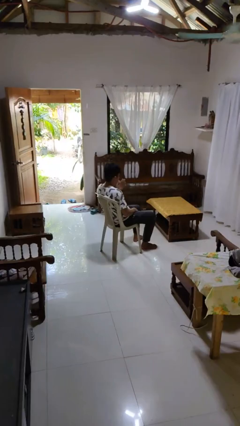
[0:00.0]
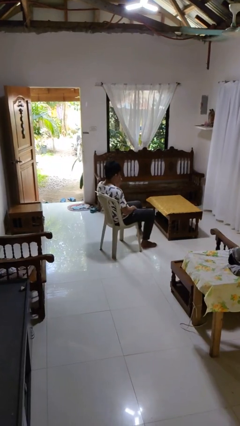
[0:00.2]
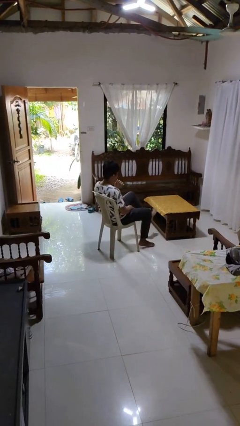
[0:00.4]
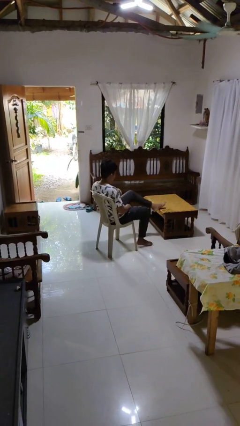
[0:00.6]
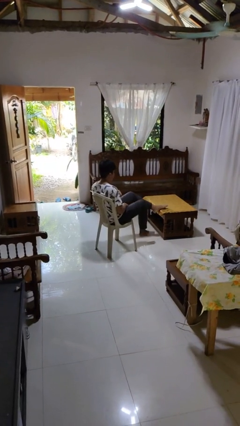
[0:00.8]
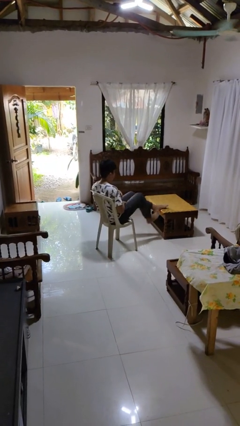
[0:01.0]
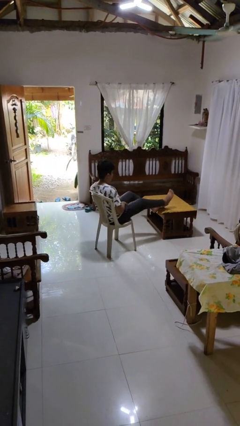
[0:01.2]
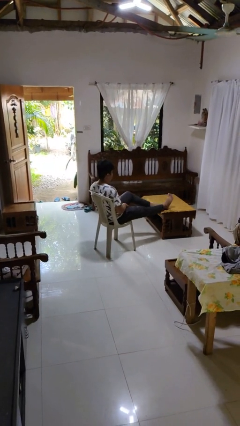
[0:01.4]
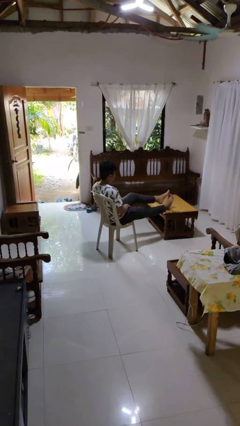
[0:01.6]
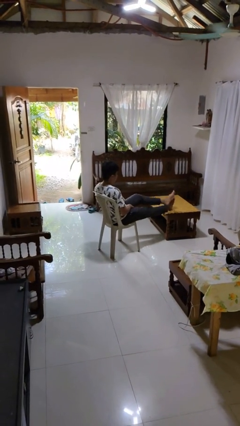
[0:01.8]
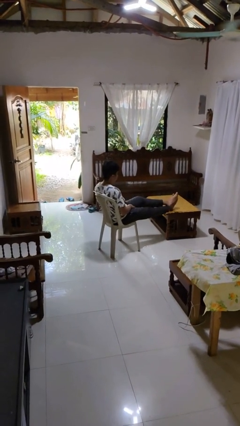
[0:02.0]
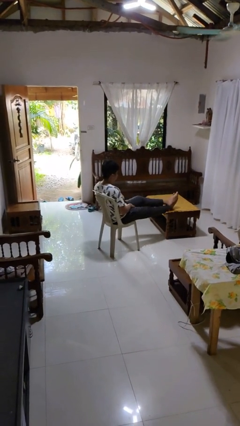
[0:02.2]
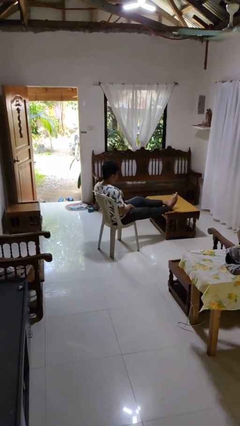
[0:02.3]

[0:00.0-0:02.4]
person puts feet up

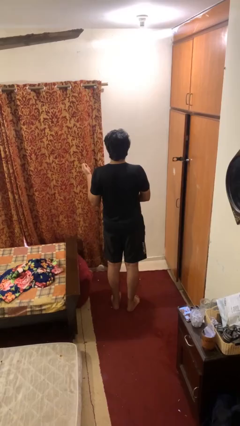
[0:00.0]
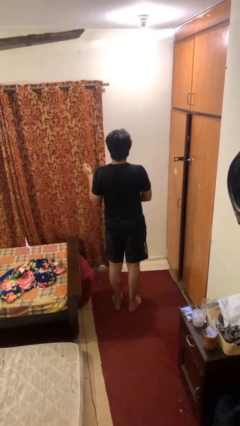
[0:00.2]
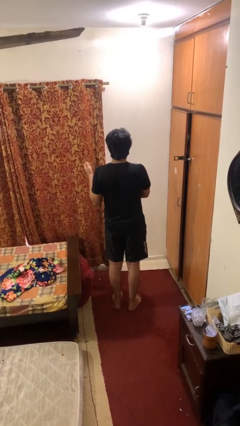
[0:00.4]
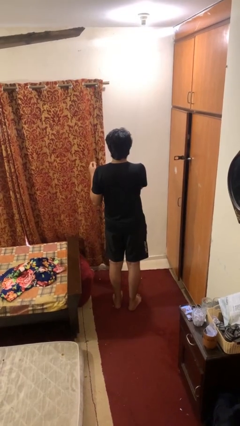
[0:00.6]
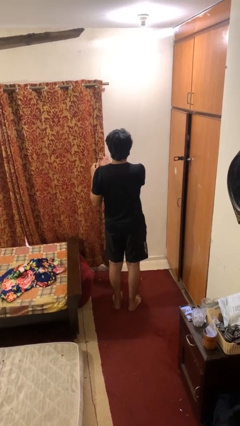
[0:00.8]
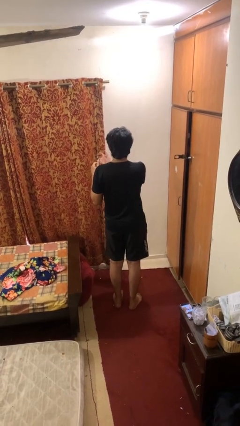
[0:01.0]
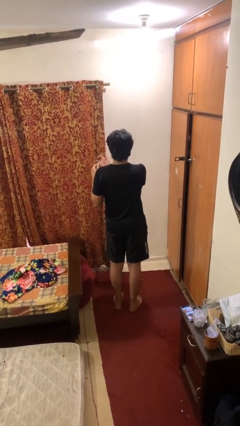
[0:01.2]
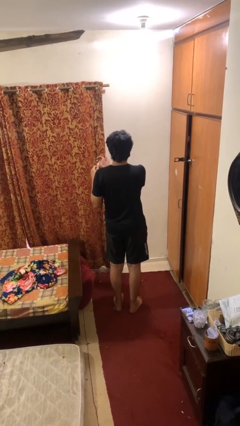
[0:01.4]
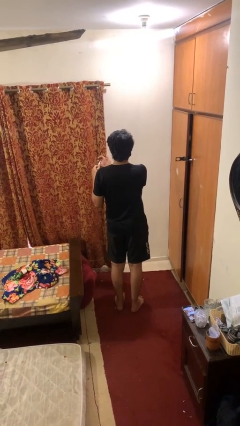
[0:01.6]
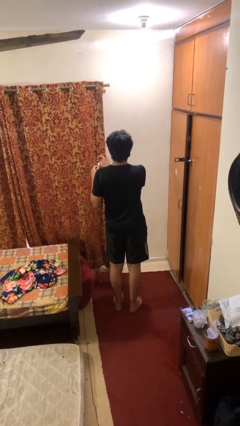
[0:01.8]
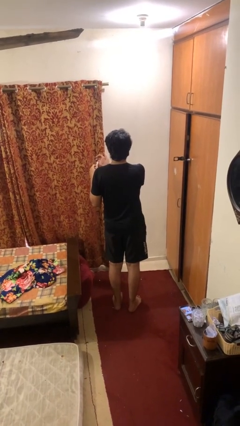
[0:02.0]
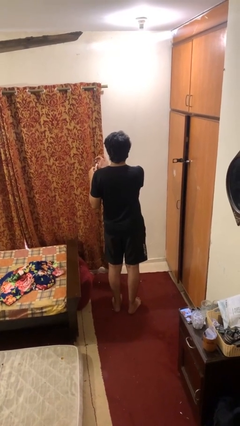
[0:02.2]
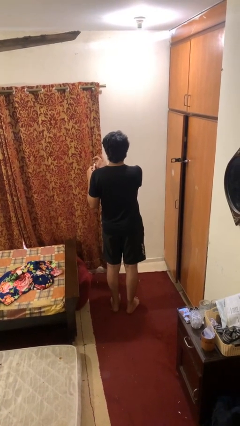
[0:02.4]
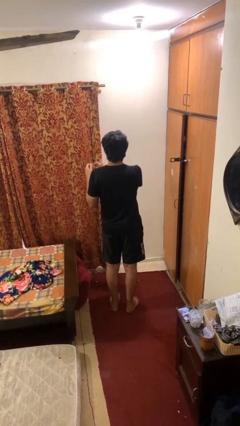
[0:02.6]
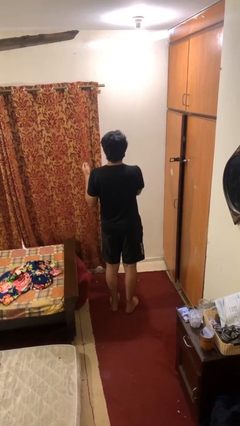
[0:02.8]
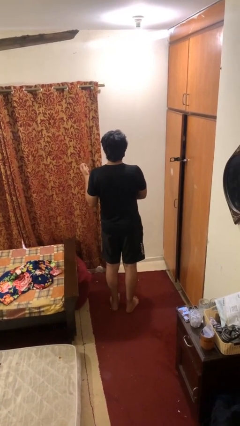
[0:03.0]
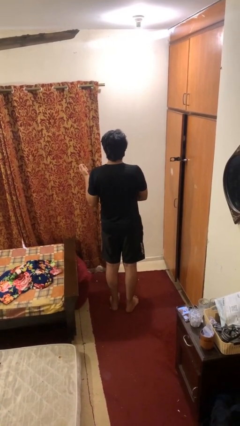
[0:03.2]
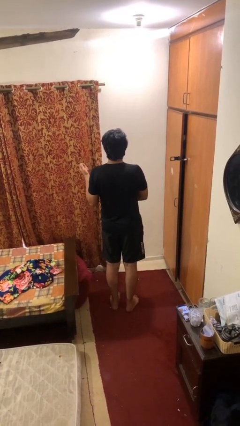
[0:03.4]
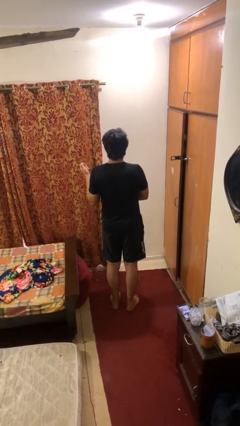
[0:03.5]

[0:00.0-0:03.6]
person files fingernails

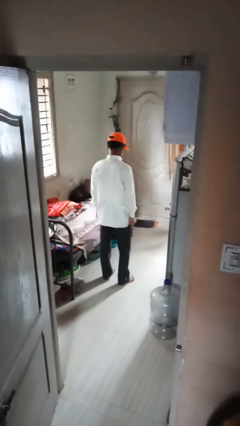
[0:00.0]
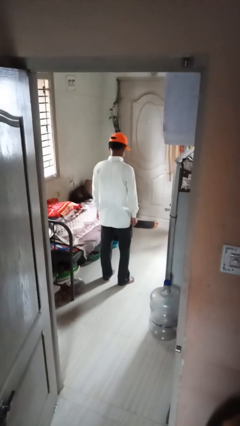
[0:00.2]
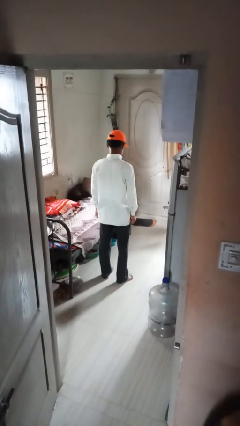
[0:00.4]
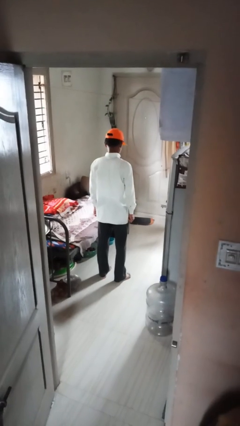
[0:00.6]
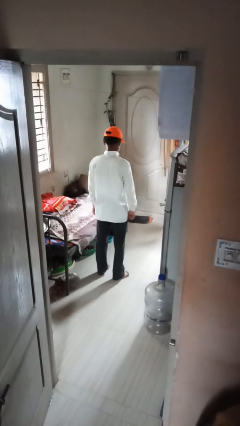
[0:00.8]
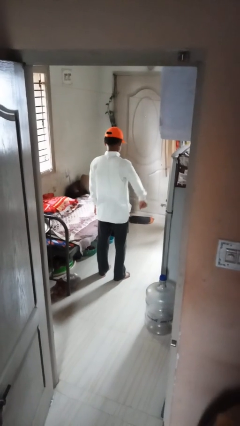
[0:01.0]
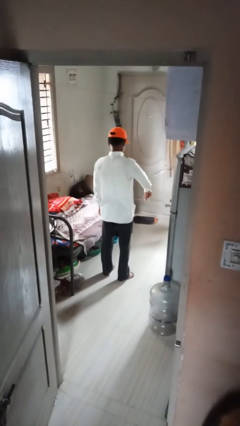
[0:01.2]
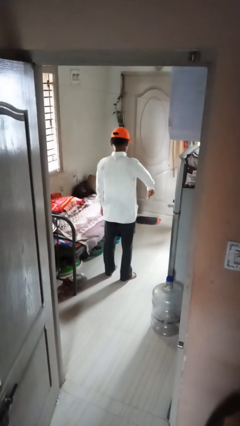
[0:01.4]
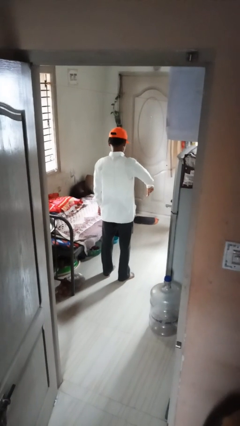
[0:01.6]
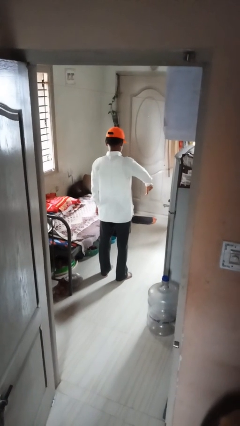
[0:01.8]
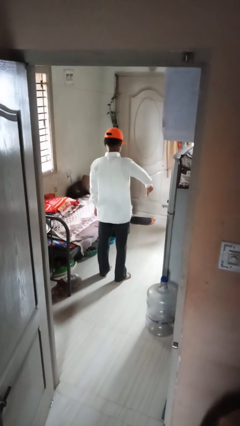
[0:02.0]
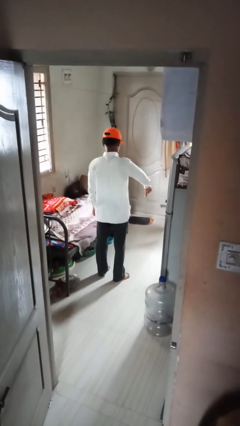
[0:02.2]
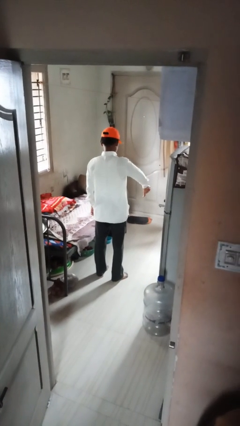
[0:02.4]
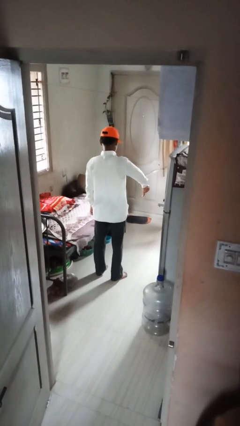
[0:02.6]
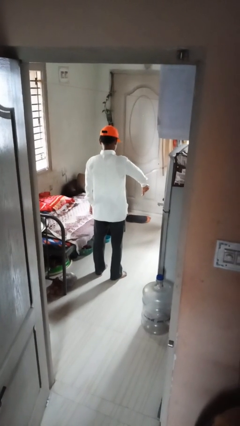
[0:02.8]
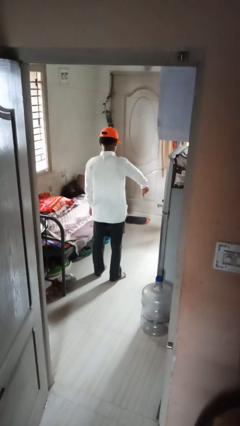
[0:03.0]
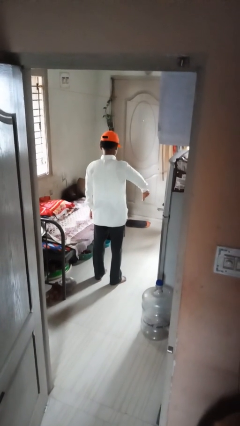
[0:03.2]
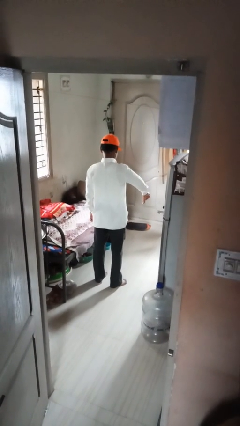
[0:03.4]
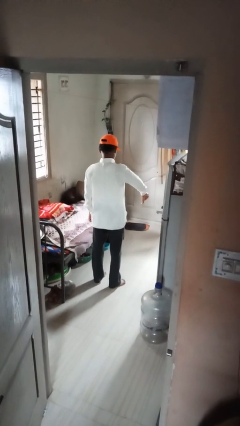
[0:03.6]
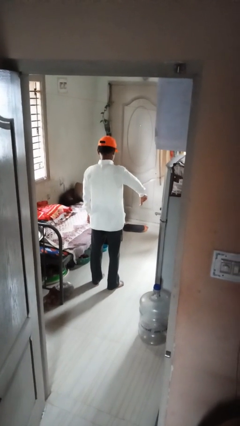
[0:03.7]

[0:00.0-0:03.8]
person gestures thumbs down

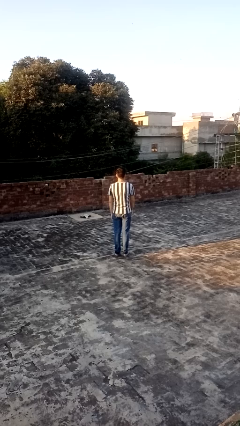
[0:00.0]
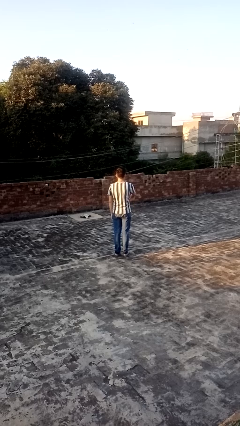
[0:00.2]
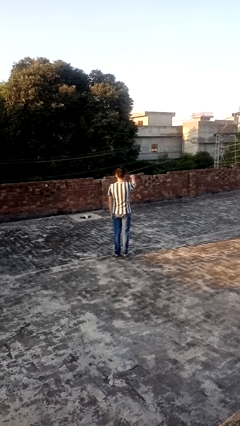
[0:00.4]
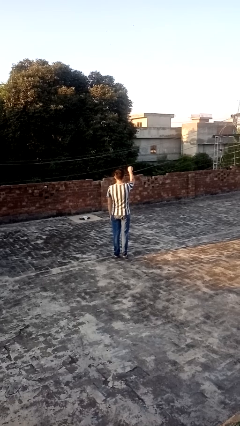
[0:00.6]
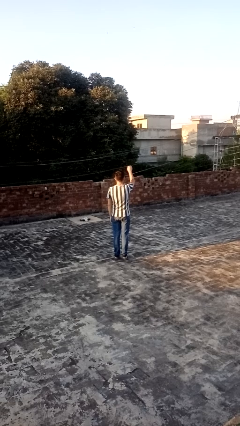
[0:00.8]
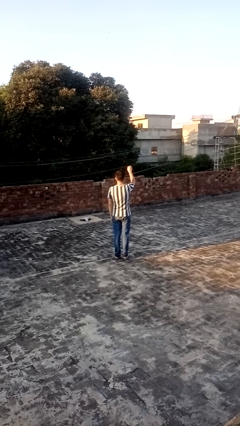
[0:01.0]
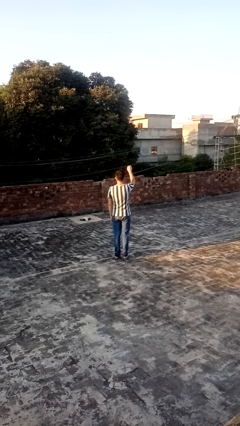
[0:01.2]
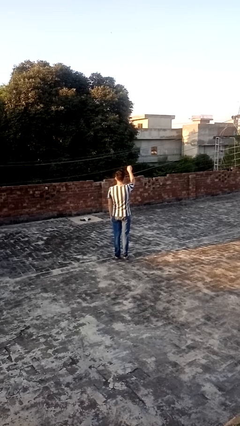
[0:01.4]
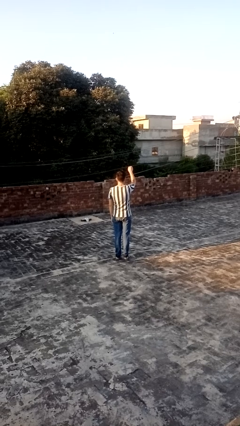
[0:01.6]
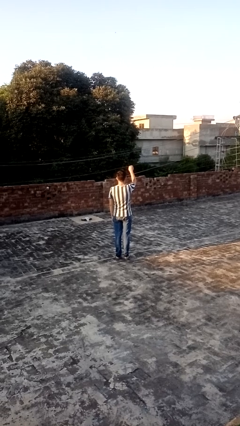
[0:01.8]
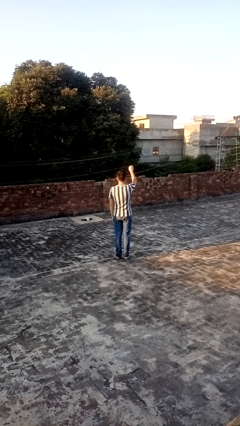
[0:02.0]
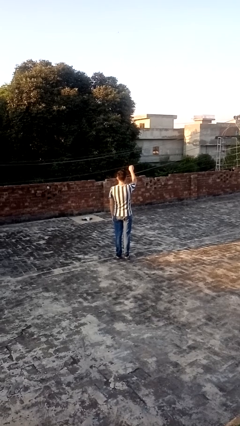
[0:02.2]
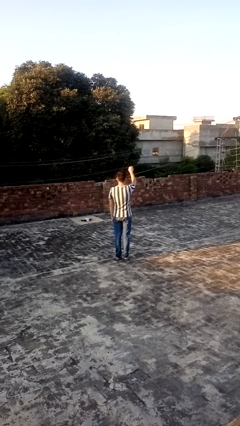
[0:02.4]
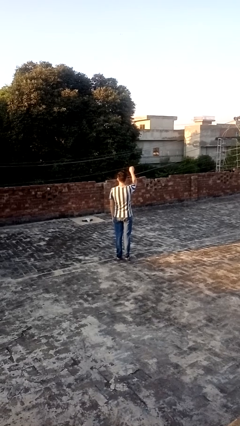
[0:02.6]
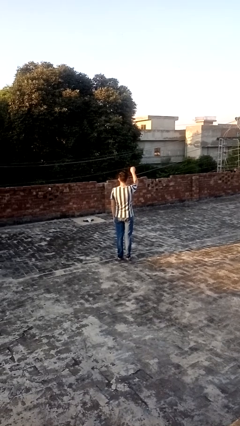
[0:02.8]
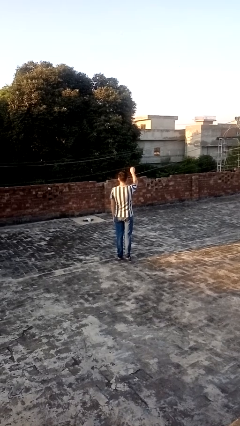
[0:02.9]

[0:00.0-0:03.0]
person gestures swipe up

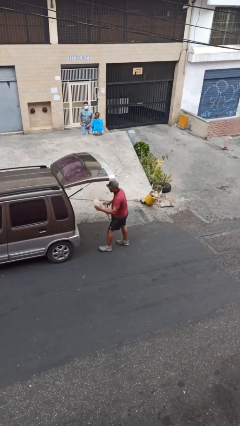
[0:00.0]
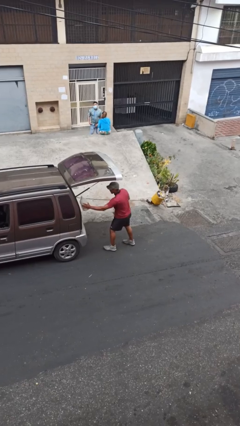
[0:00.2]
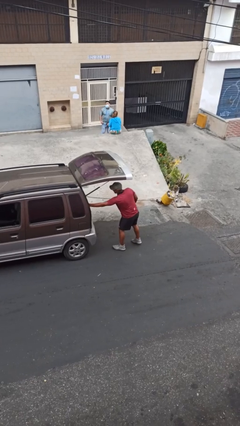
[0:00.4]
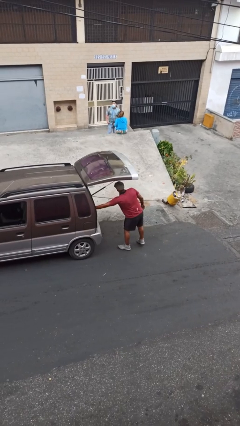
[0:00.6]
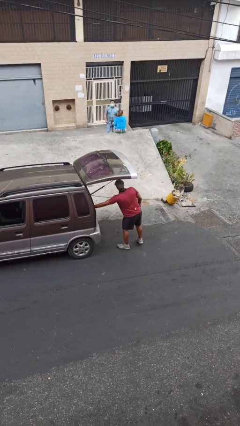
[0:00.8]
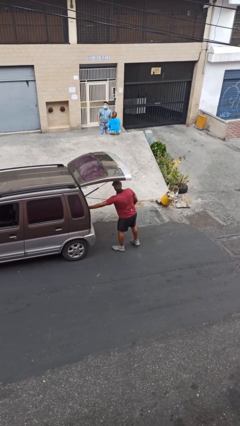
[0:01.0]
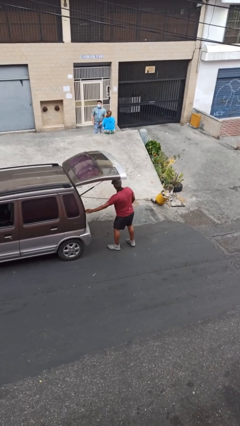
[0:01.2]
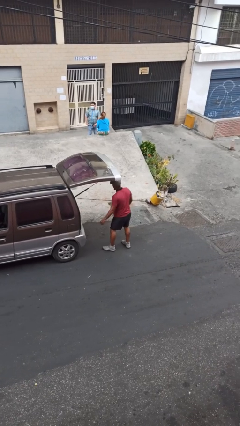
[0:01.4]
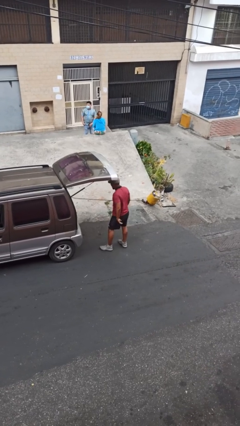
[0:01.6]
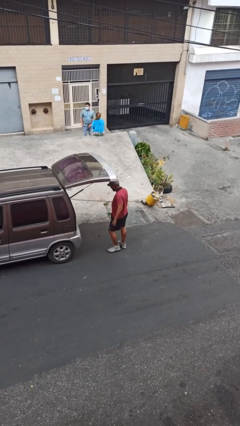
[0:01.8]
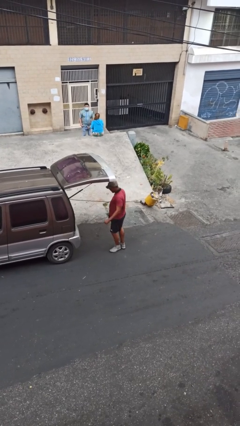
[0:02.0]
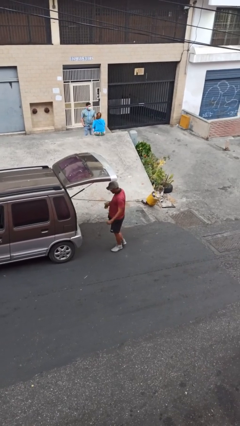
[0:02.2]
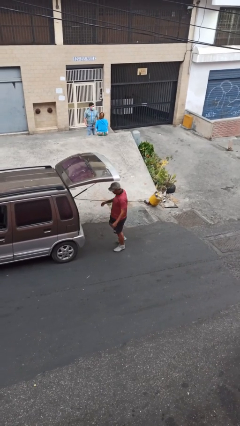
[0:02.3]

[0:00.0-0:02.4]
person loads car

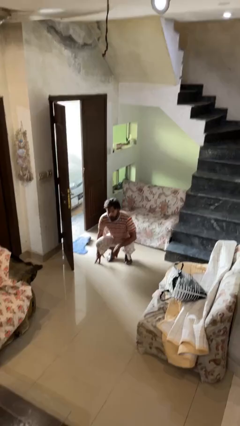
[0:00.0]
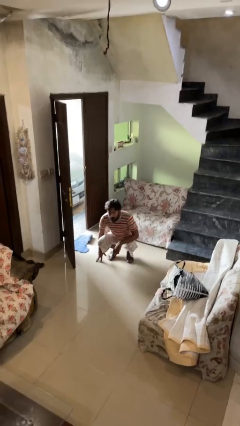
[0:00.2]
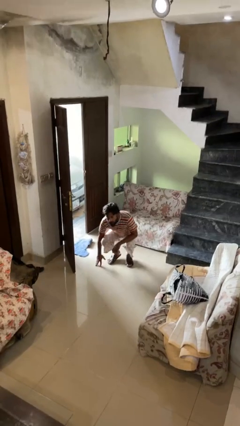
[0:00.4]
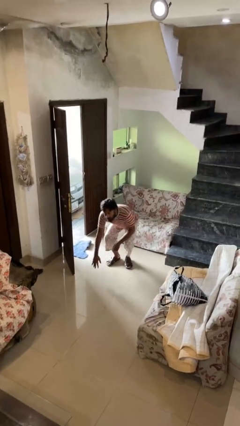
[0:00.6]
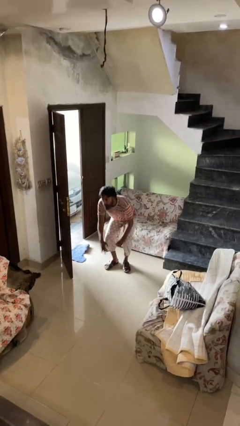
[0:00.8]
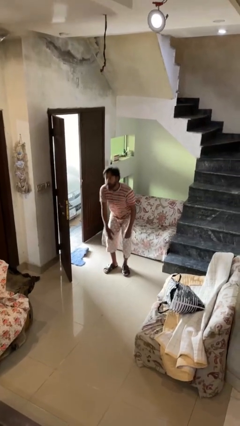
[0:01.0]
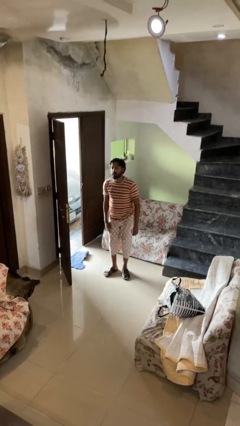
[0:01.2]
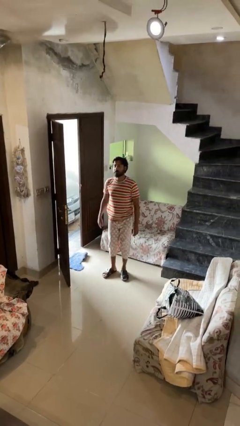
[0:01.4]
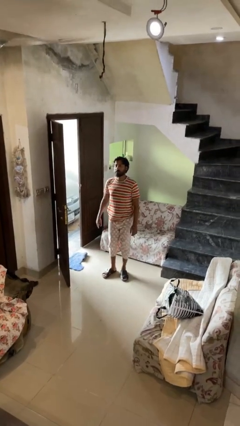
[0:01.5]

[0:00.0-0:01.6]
person stands up
